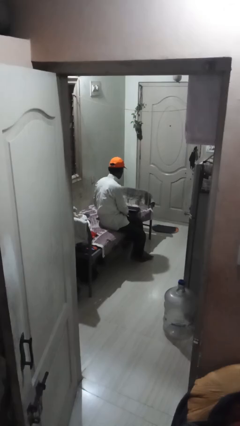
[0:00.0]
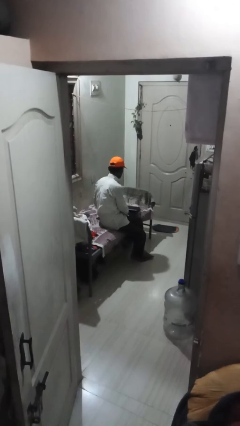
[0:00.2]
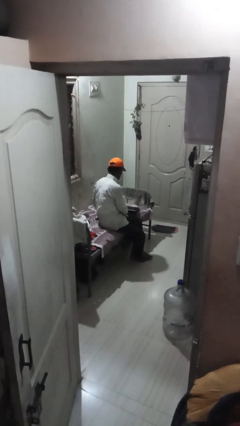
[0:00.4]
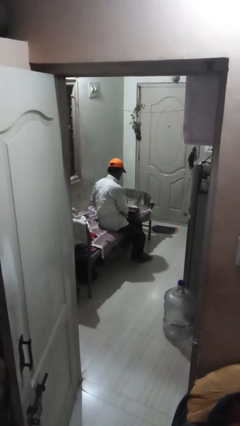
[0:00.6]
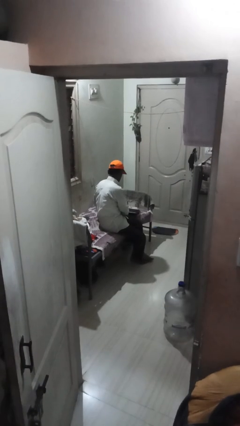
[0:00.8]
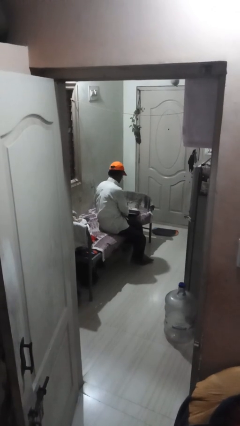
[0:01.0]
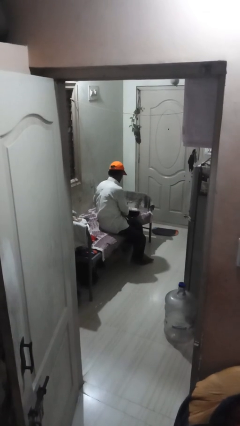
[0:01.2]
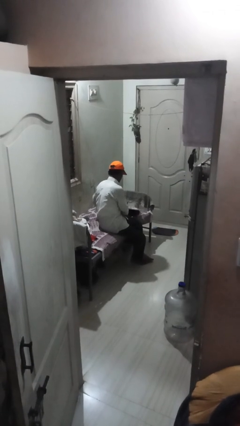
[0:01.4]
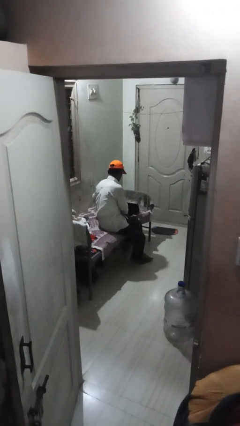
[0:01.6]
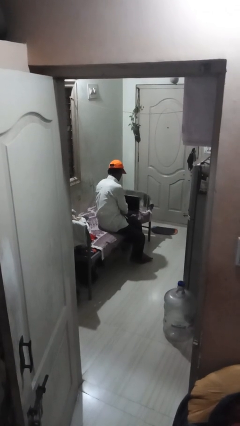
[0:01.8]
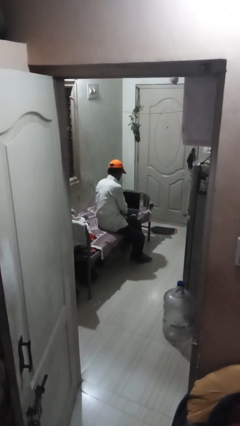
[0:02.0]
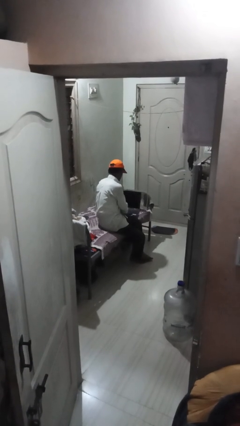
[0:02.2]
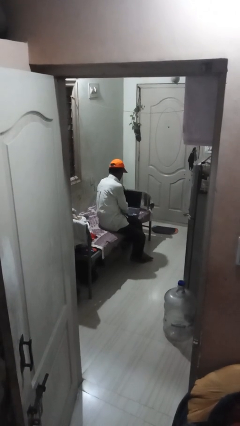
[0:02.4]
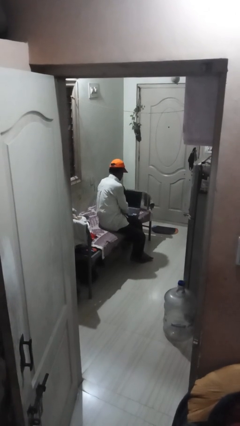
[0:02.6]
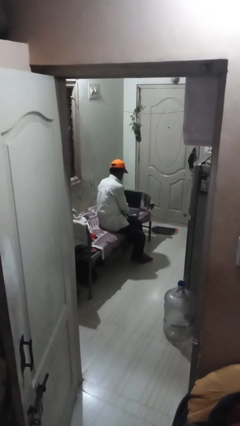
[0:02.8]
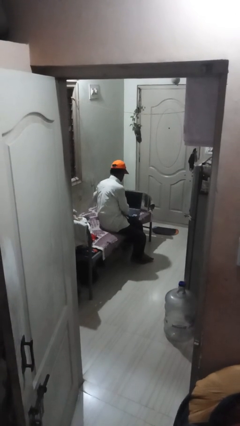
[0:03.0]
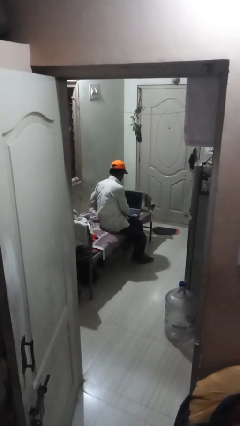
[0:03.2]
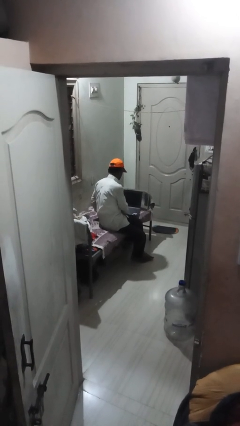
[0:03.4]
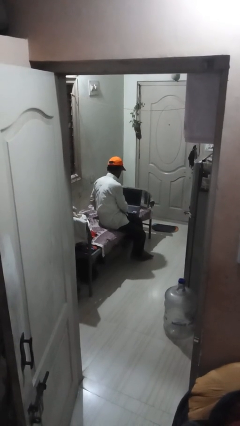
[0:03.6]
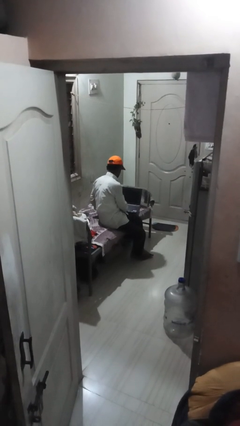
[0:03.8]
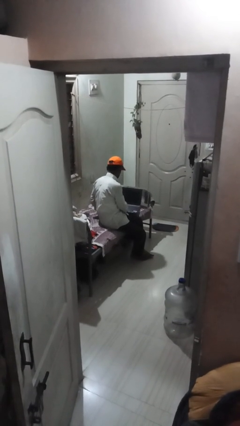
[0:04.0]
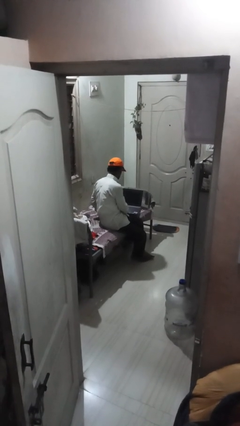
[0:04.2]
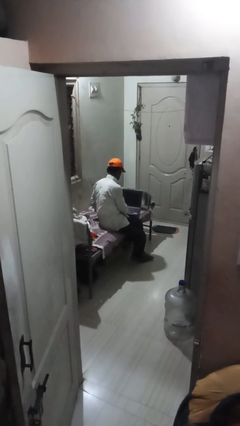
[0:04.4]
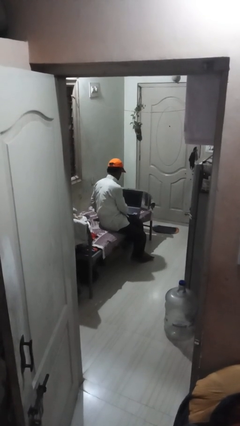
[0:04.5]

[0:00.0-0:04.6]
person opens laptop

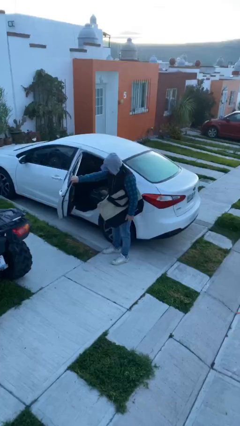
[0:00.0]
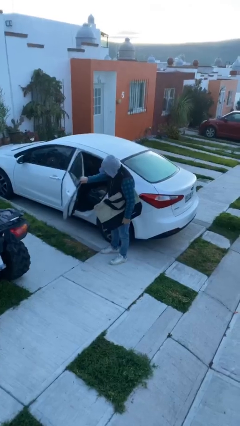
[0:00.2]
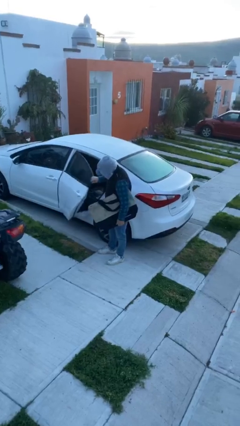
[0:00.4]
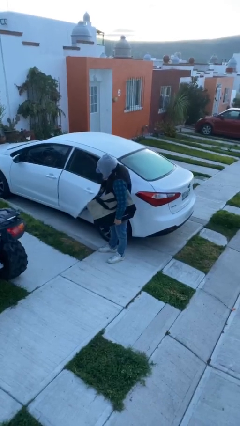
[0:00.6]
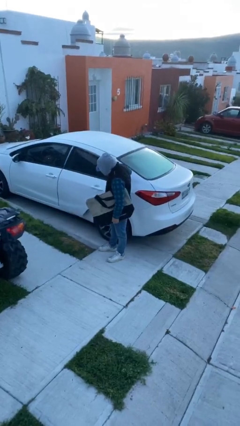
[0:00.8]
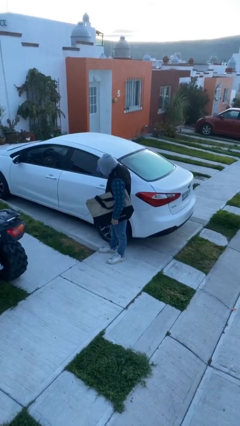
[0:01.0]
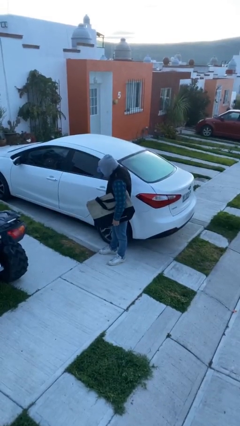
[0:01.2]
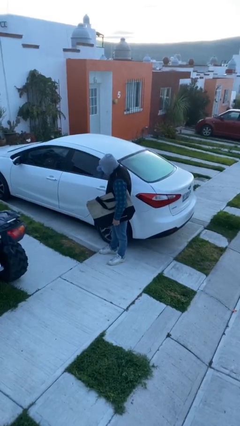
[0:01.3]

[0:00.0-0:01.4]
person closes car door

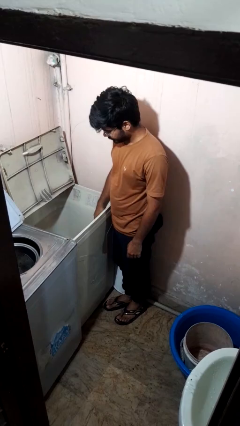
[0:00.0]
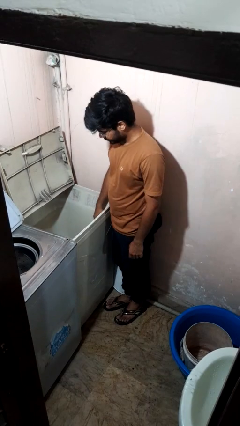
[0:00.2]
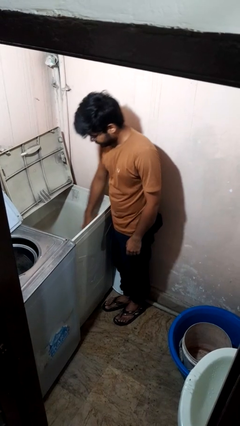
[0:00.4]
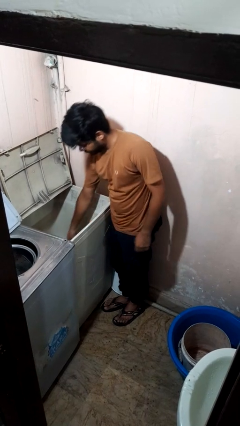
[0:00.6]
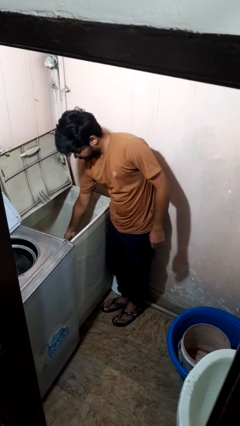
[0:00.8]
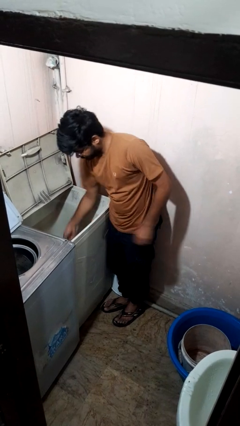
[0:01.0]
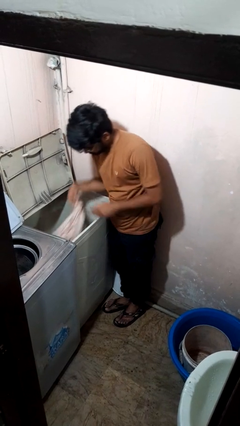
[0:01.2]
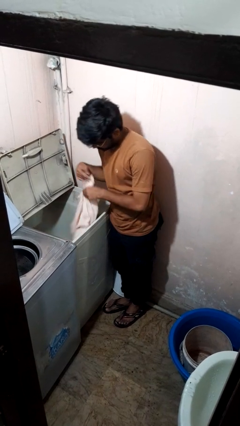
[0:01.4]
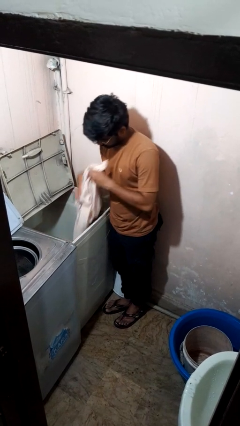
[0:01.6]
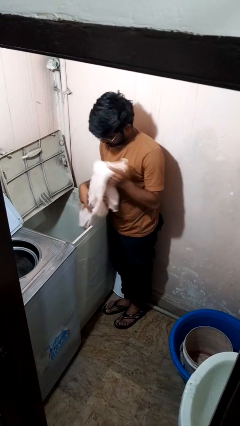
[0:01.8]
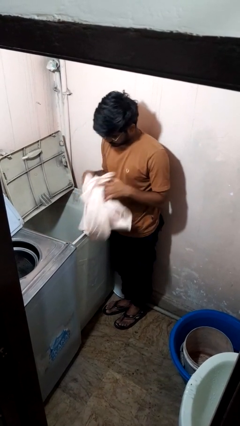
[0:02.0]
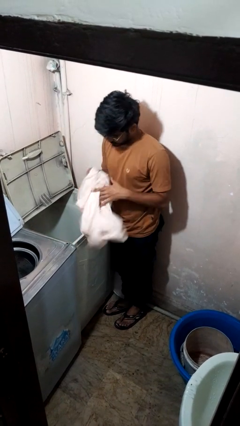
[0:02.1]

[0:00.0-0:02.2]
person unloads clotheswasher

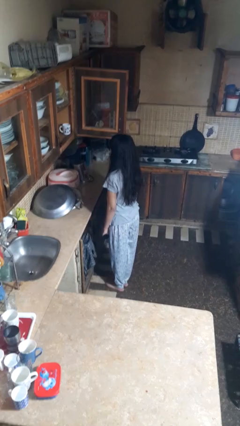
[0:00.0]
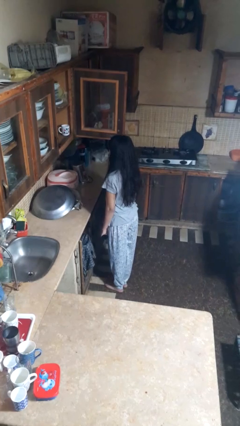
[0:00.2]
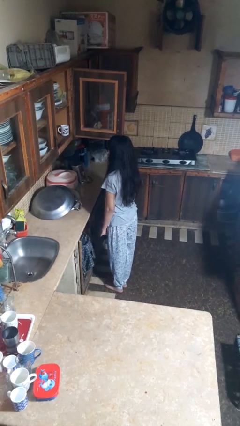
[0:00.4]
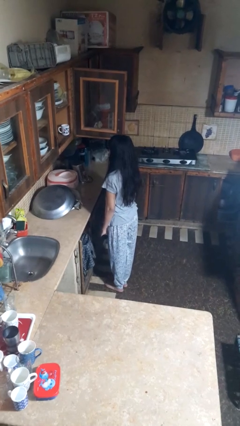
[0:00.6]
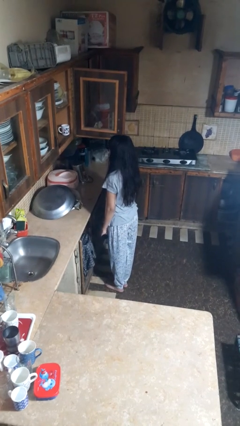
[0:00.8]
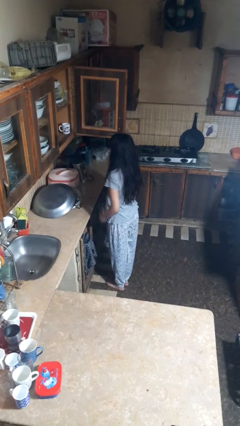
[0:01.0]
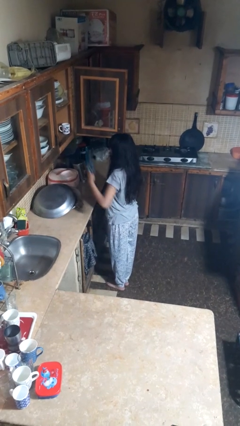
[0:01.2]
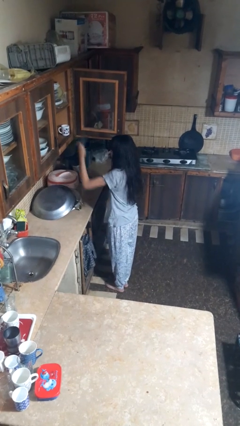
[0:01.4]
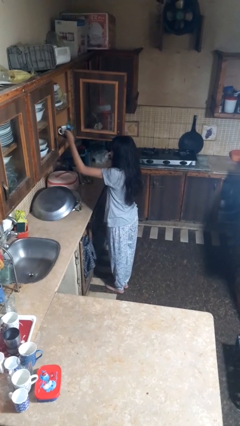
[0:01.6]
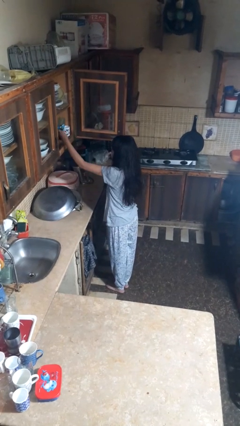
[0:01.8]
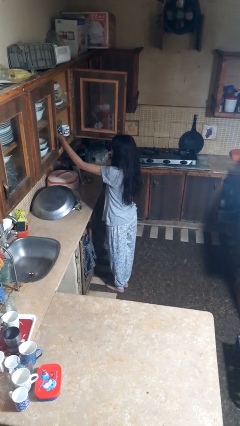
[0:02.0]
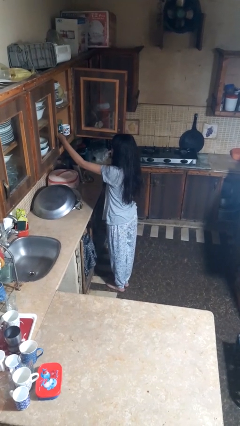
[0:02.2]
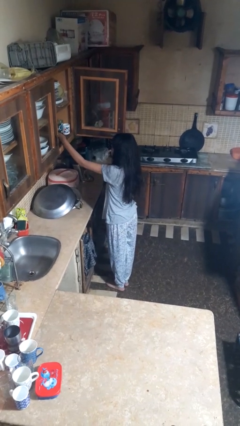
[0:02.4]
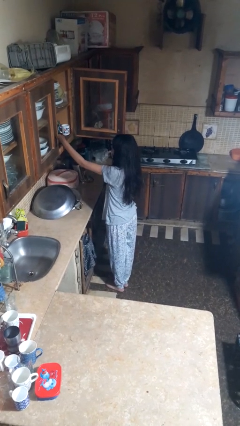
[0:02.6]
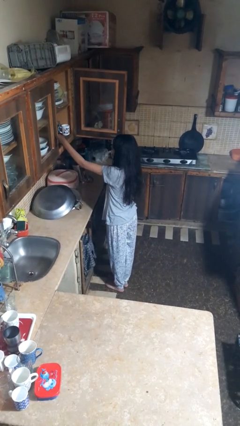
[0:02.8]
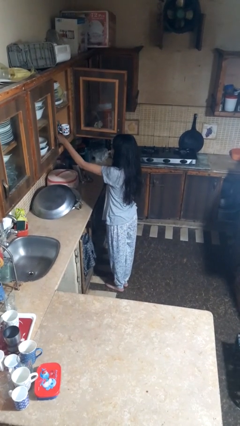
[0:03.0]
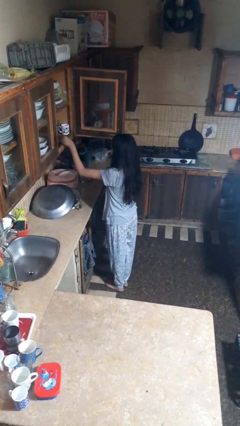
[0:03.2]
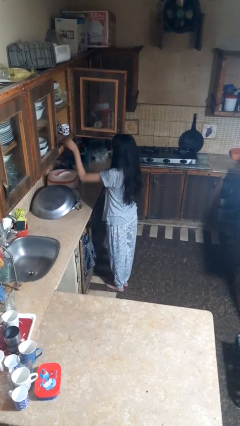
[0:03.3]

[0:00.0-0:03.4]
person puts object in cabinet

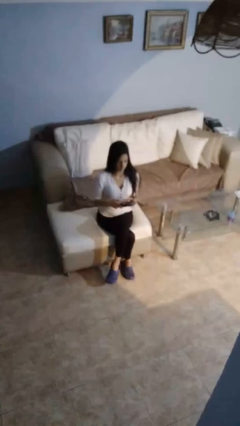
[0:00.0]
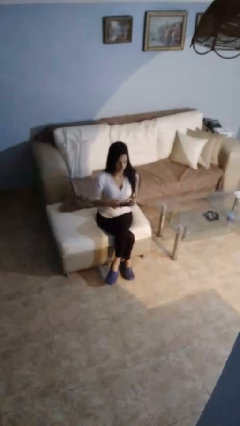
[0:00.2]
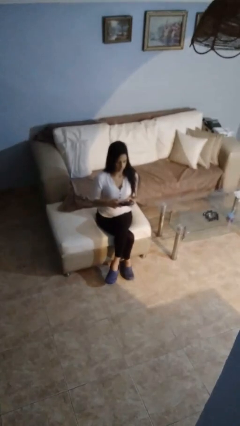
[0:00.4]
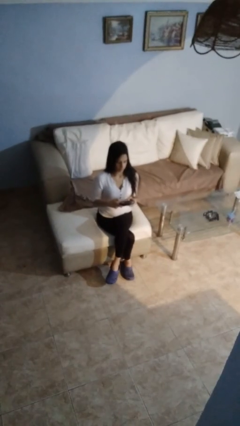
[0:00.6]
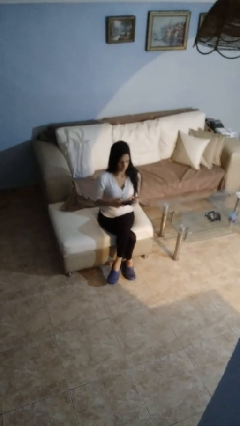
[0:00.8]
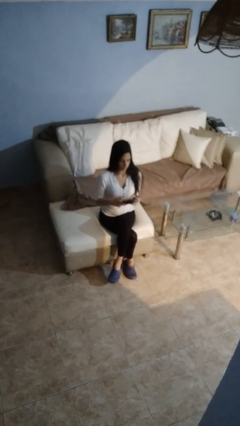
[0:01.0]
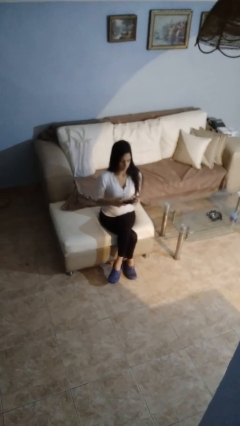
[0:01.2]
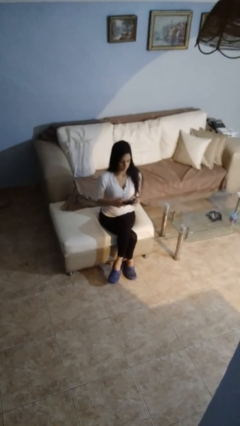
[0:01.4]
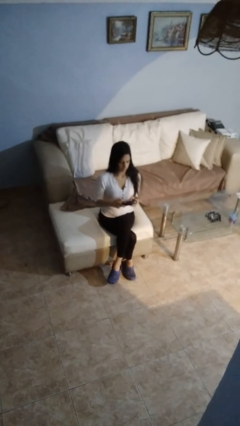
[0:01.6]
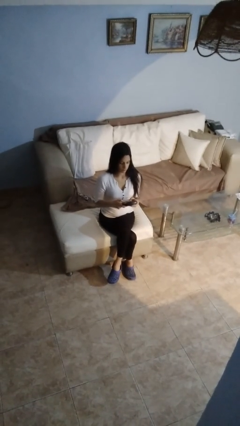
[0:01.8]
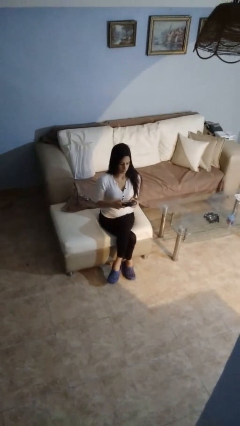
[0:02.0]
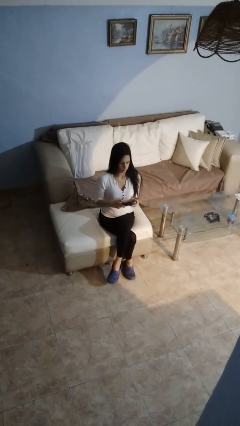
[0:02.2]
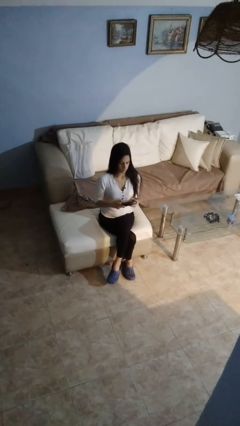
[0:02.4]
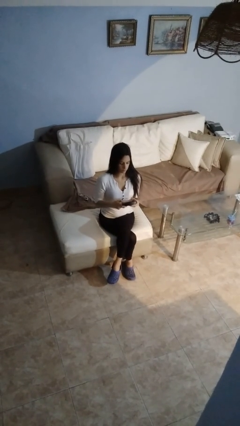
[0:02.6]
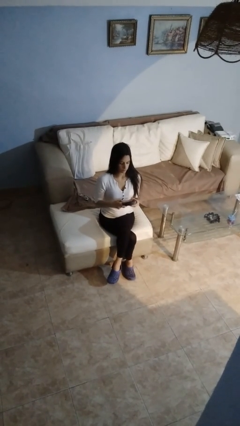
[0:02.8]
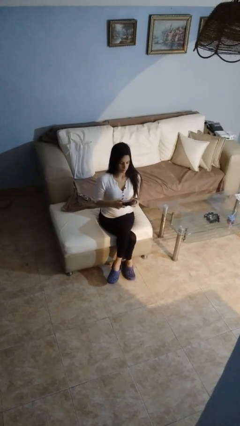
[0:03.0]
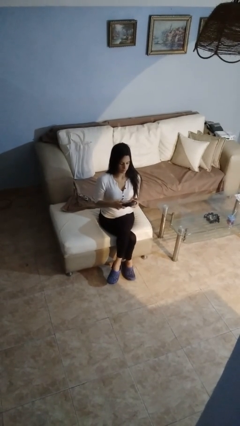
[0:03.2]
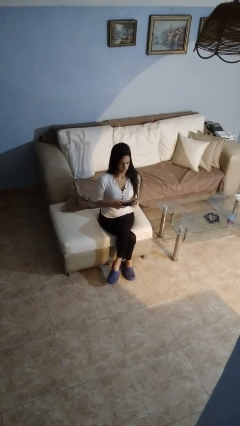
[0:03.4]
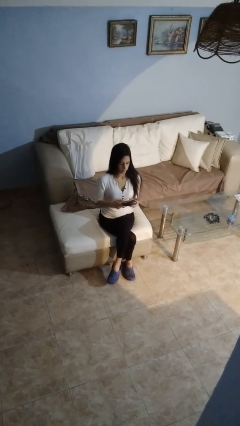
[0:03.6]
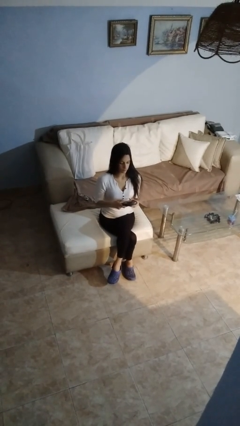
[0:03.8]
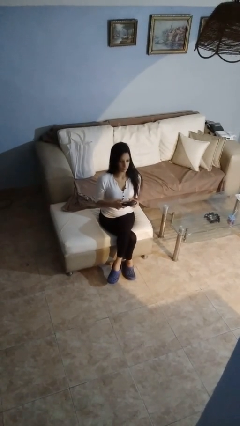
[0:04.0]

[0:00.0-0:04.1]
person interacts with handheld game

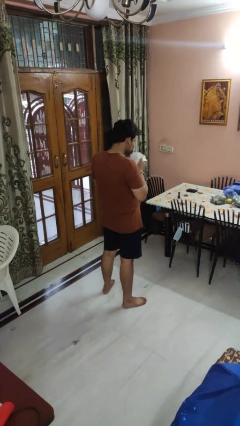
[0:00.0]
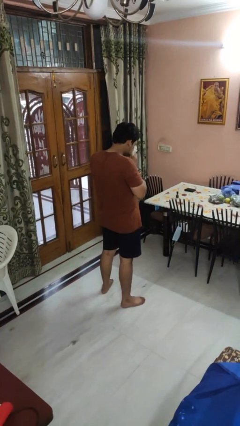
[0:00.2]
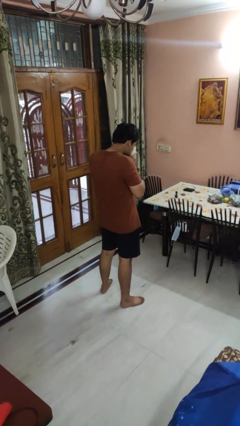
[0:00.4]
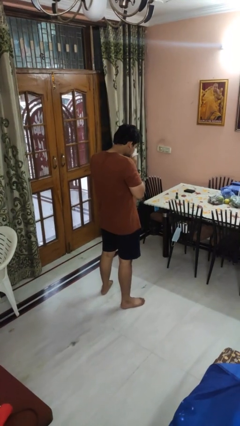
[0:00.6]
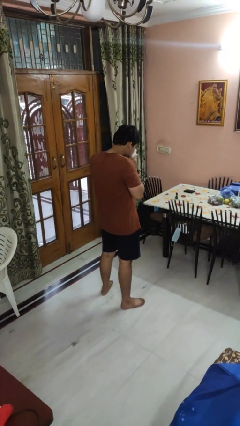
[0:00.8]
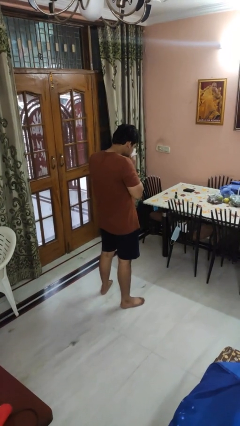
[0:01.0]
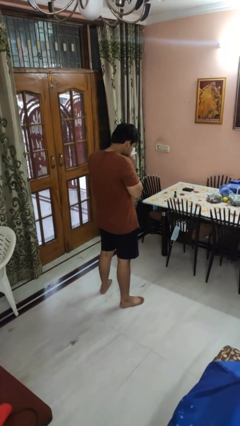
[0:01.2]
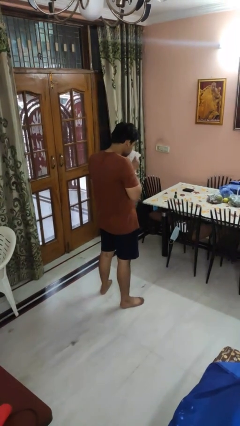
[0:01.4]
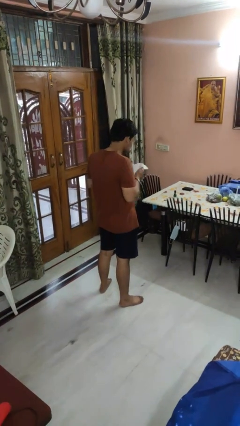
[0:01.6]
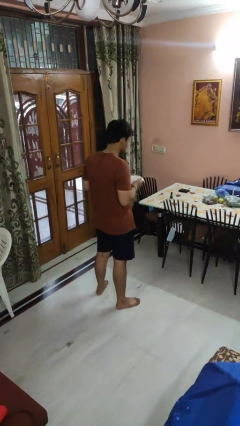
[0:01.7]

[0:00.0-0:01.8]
person blows nose

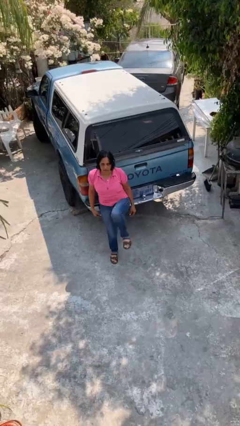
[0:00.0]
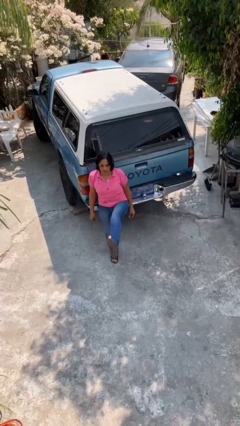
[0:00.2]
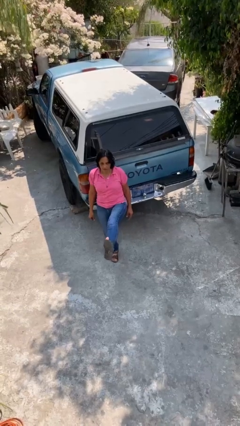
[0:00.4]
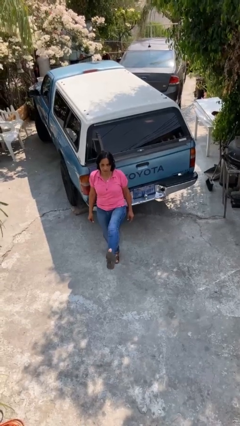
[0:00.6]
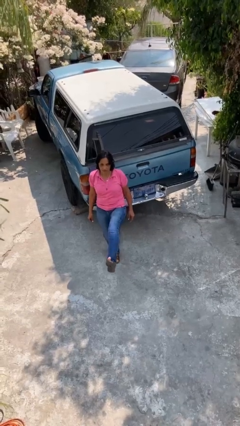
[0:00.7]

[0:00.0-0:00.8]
person karate kicks
